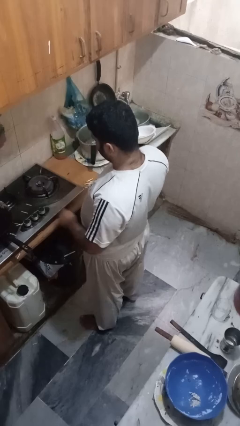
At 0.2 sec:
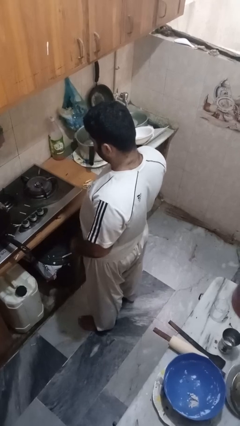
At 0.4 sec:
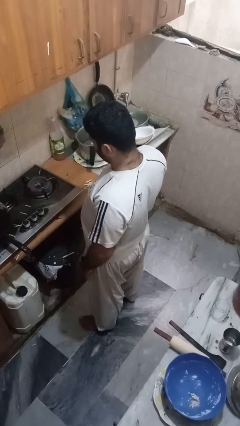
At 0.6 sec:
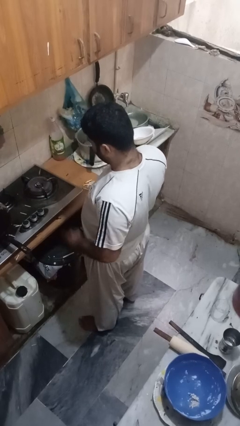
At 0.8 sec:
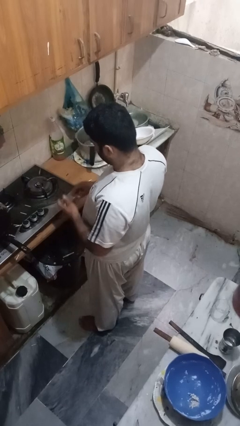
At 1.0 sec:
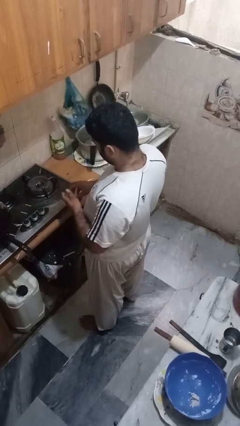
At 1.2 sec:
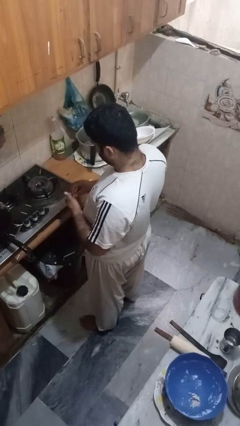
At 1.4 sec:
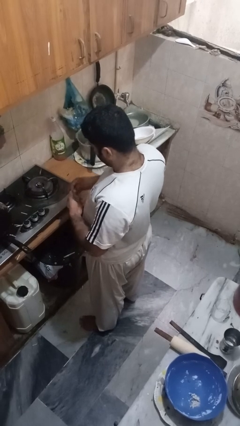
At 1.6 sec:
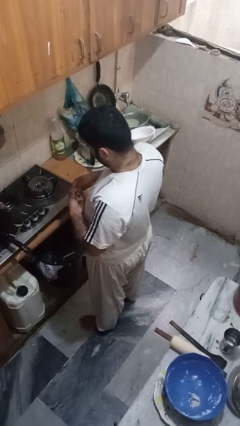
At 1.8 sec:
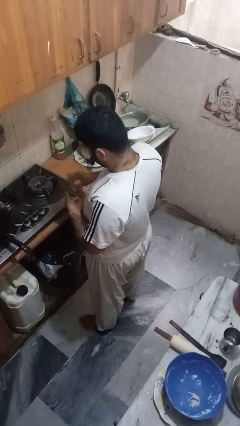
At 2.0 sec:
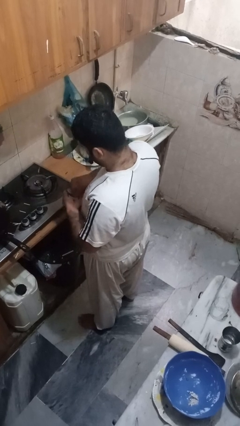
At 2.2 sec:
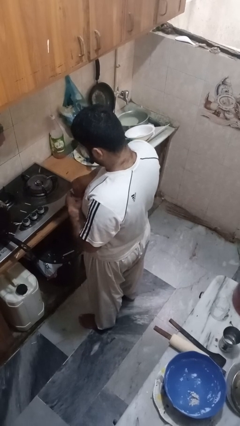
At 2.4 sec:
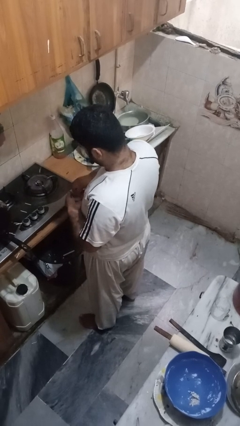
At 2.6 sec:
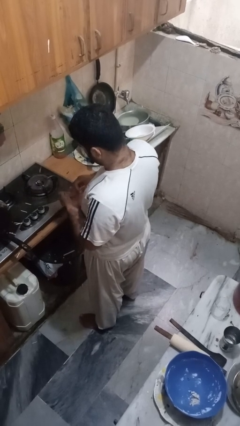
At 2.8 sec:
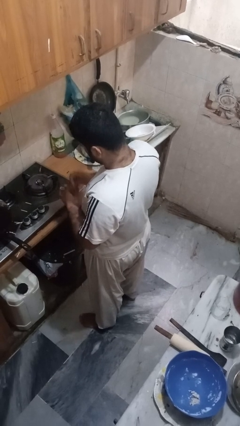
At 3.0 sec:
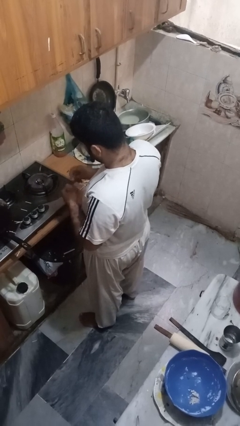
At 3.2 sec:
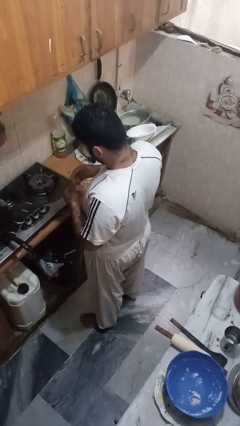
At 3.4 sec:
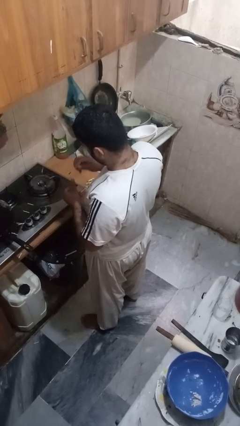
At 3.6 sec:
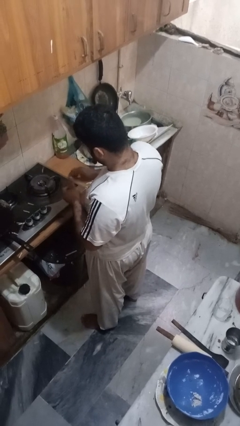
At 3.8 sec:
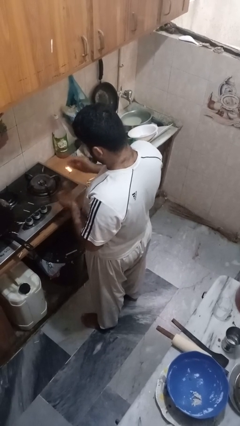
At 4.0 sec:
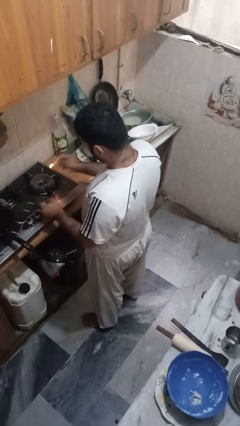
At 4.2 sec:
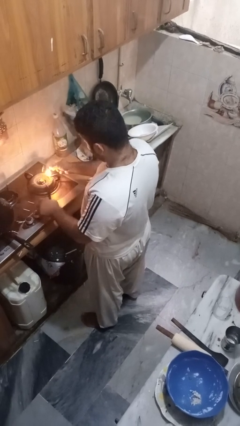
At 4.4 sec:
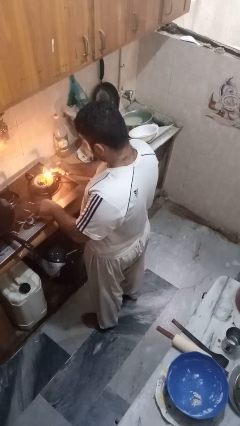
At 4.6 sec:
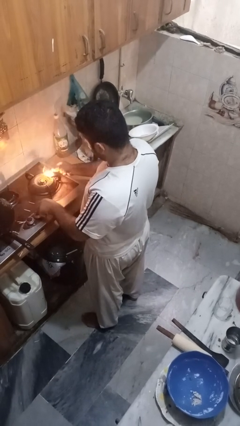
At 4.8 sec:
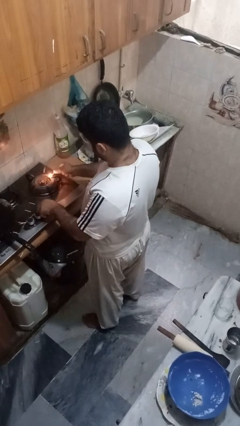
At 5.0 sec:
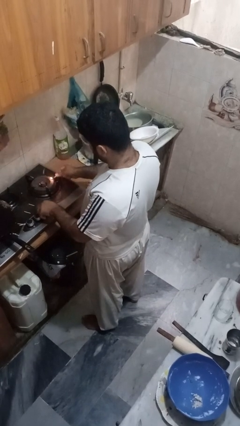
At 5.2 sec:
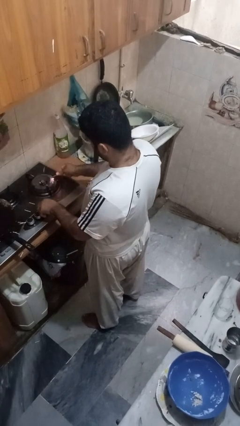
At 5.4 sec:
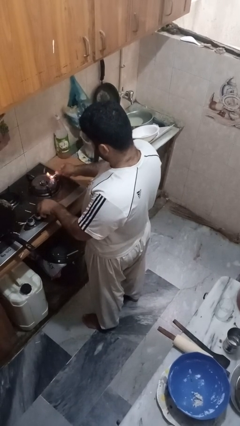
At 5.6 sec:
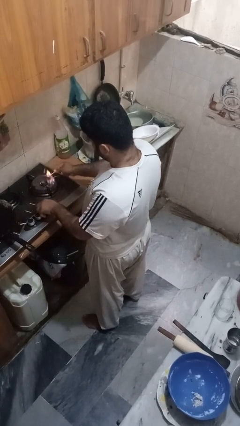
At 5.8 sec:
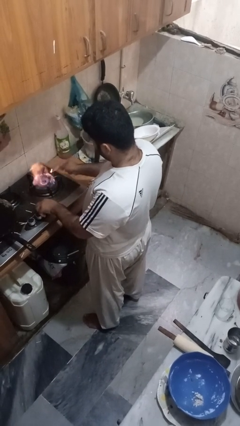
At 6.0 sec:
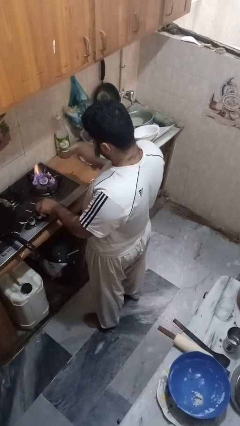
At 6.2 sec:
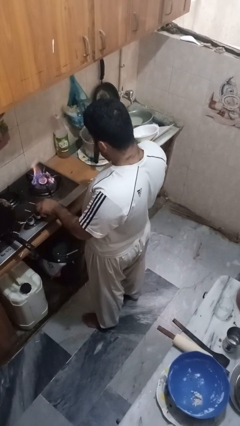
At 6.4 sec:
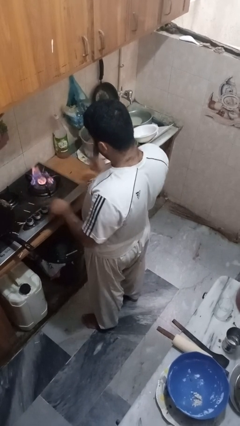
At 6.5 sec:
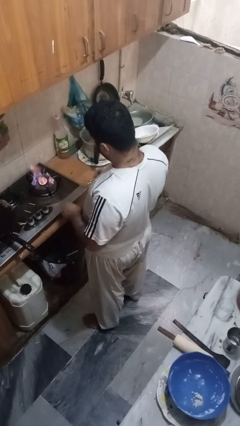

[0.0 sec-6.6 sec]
person turns on stovetop

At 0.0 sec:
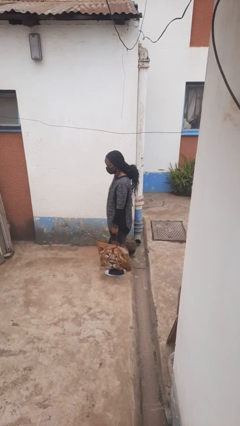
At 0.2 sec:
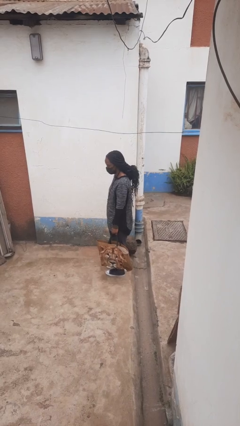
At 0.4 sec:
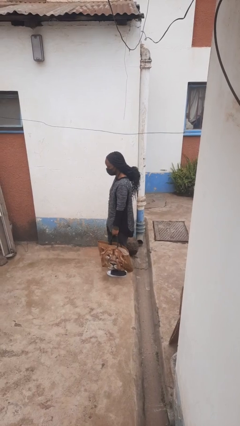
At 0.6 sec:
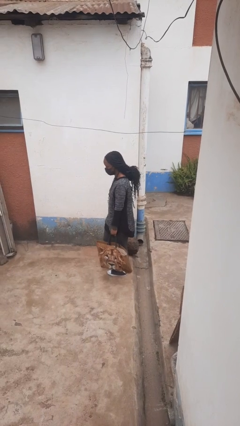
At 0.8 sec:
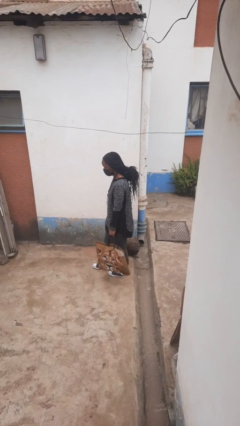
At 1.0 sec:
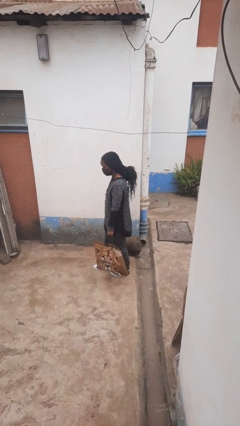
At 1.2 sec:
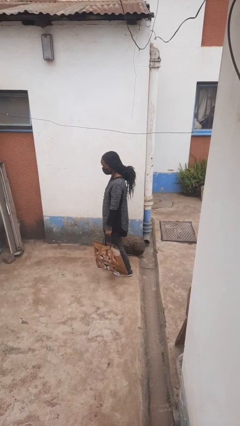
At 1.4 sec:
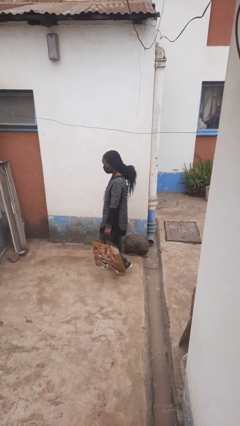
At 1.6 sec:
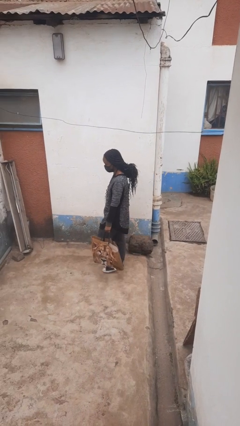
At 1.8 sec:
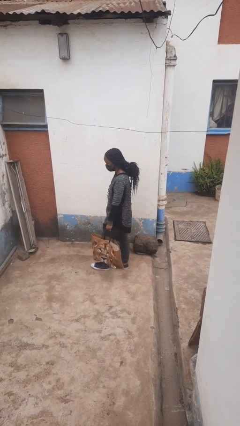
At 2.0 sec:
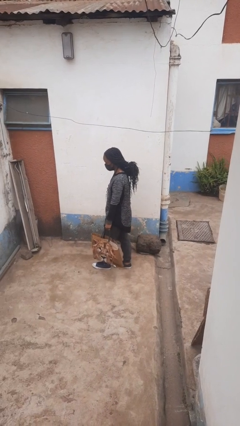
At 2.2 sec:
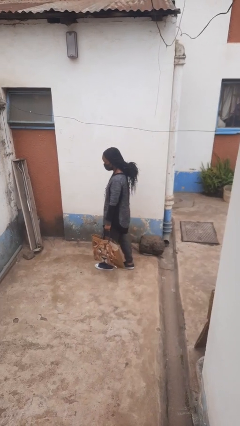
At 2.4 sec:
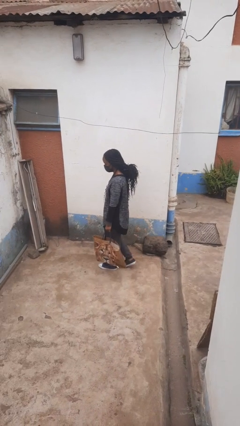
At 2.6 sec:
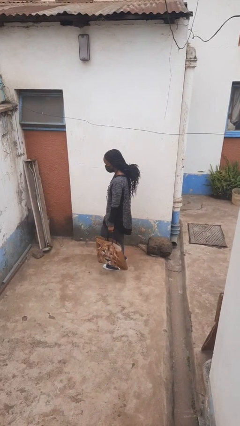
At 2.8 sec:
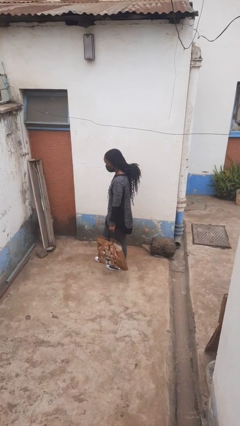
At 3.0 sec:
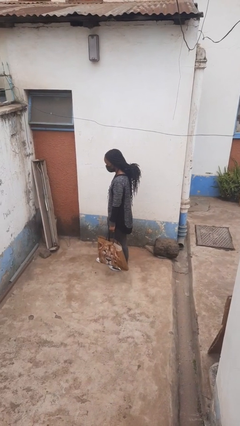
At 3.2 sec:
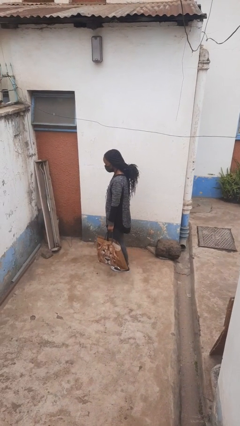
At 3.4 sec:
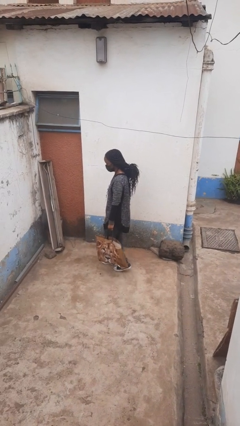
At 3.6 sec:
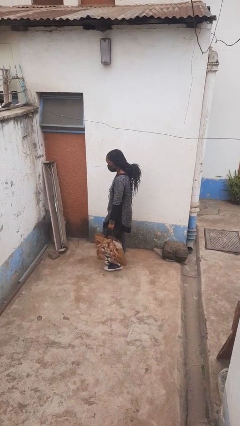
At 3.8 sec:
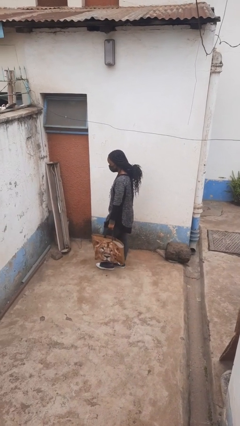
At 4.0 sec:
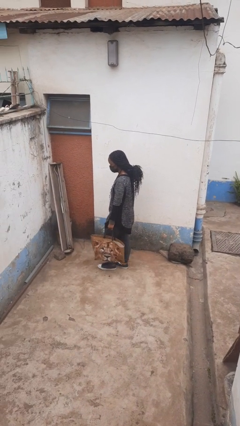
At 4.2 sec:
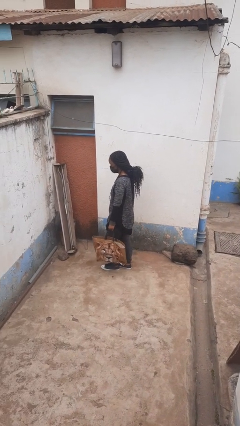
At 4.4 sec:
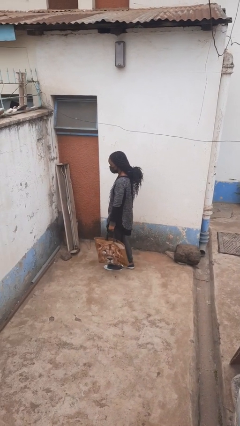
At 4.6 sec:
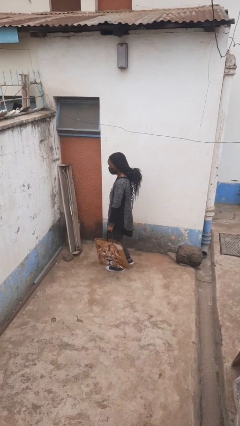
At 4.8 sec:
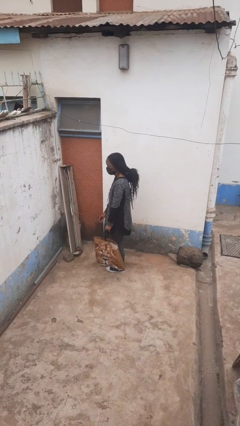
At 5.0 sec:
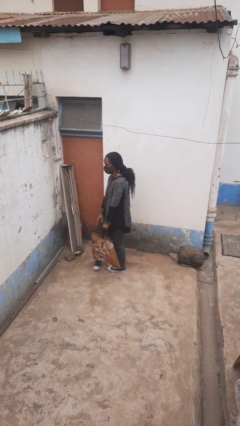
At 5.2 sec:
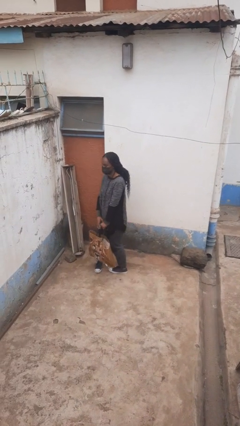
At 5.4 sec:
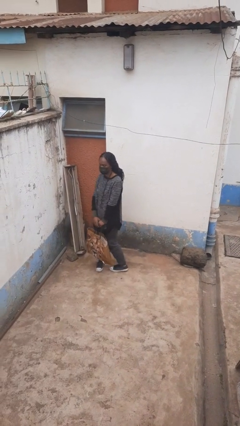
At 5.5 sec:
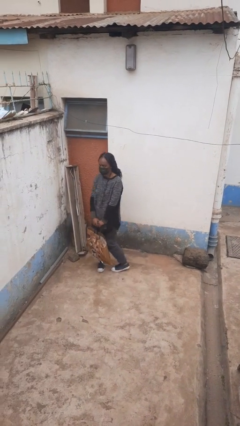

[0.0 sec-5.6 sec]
person carries groceries

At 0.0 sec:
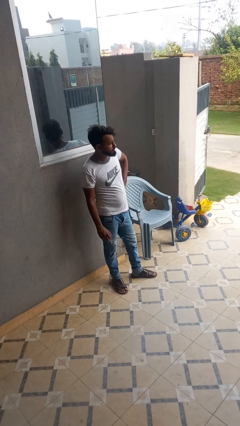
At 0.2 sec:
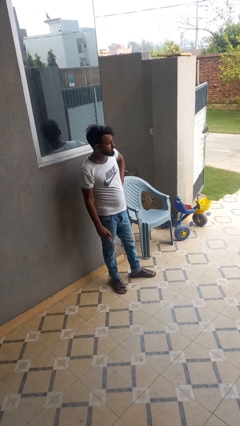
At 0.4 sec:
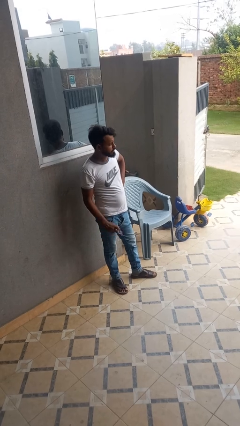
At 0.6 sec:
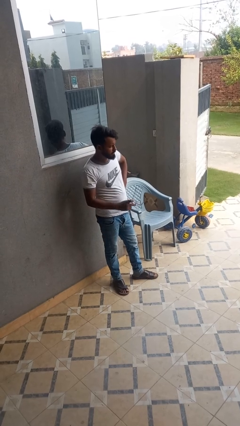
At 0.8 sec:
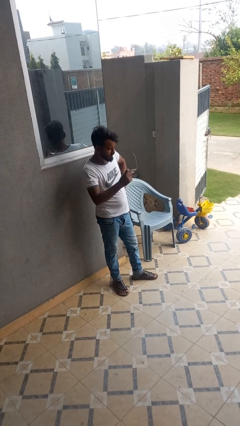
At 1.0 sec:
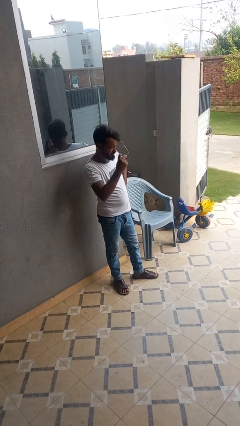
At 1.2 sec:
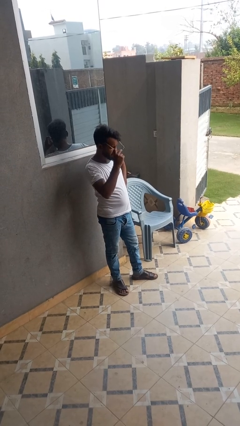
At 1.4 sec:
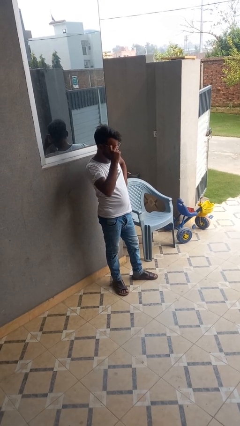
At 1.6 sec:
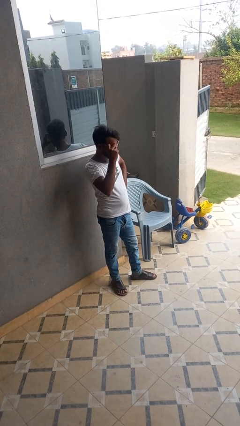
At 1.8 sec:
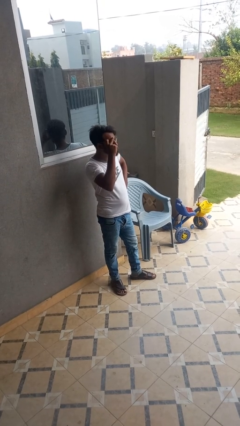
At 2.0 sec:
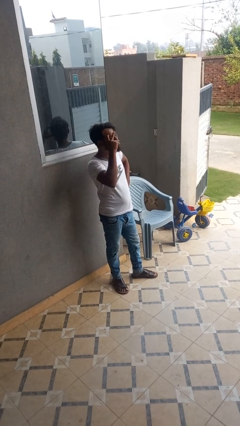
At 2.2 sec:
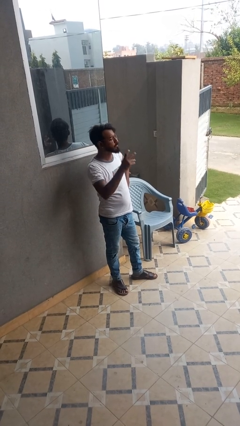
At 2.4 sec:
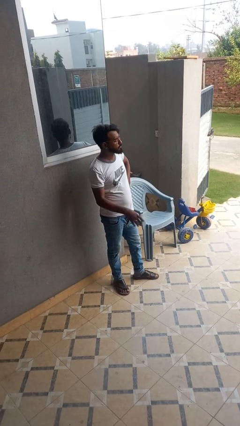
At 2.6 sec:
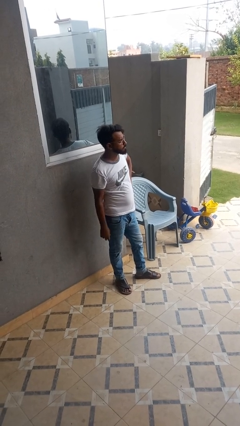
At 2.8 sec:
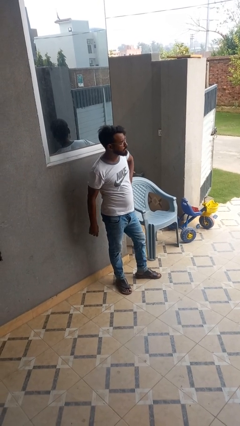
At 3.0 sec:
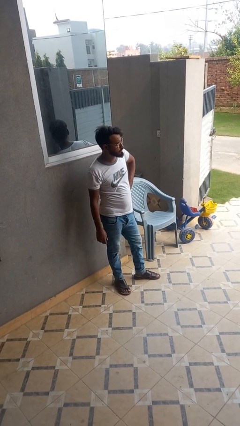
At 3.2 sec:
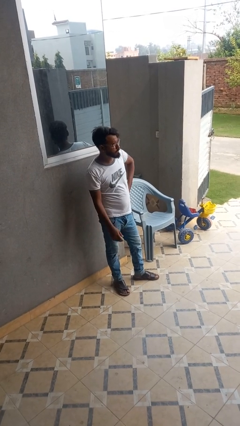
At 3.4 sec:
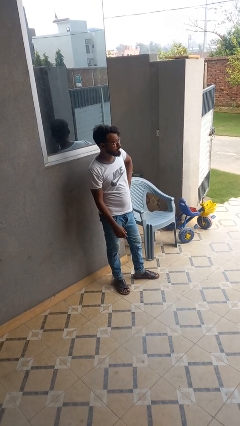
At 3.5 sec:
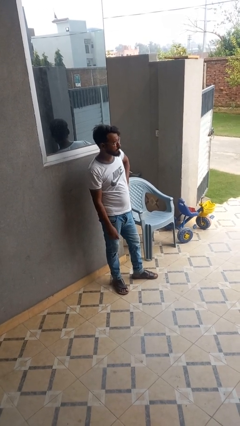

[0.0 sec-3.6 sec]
person puts on glasses

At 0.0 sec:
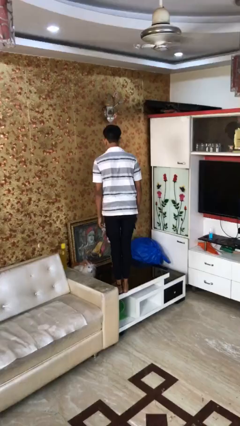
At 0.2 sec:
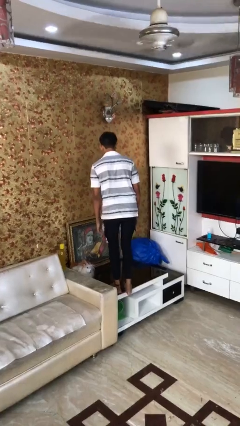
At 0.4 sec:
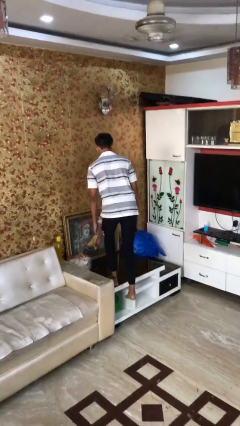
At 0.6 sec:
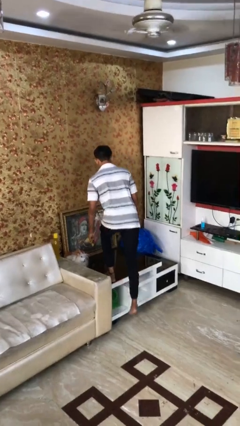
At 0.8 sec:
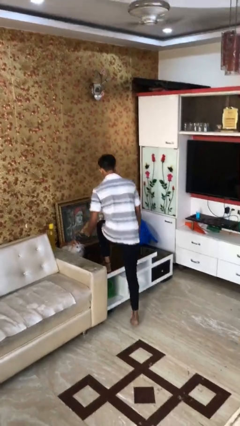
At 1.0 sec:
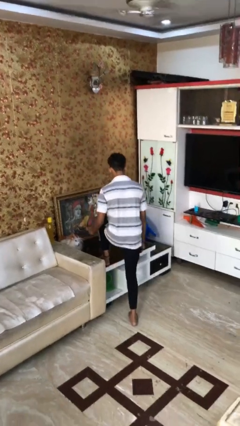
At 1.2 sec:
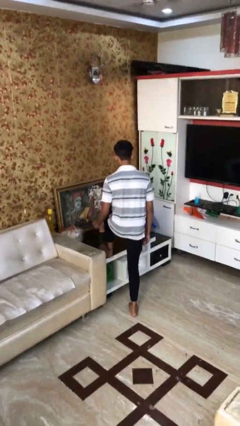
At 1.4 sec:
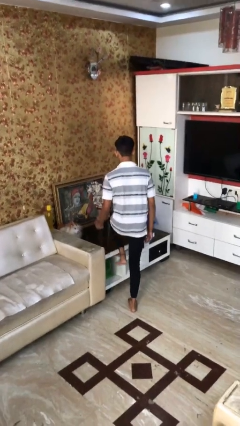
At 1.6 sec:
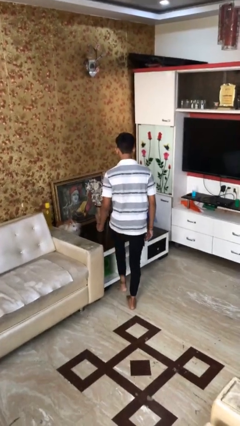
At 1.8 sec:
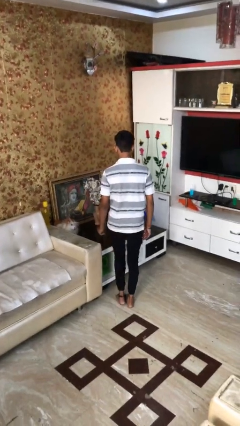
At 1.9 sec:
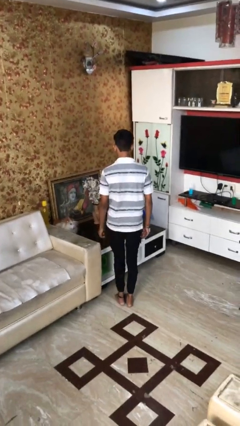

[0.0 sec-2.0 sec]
person climbs off table
